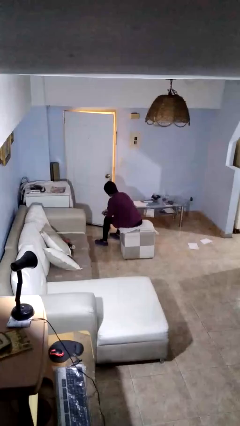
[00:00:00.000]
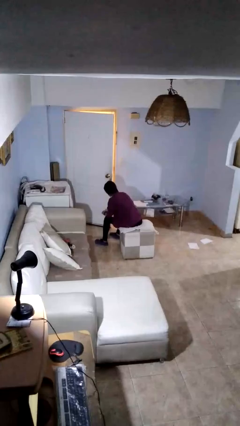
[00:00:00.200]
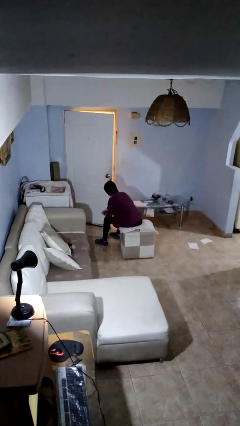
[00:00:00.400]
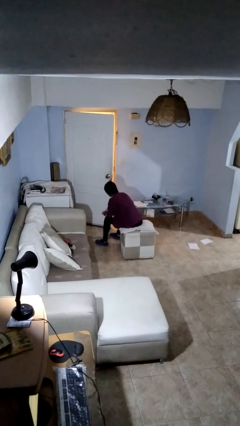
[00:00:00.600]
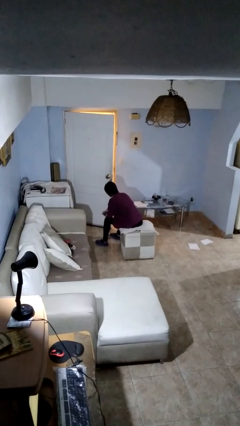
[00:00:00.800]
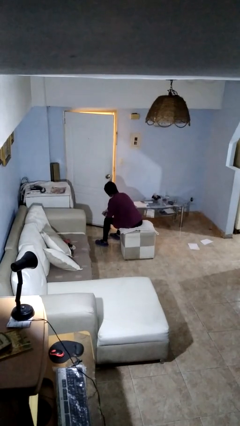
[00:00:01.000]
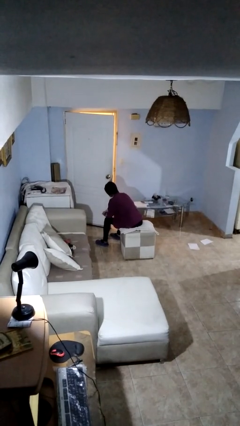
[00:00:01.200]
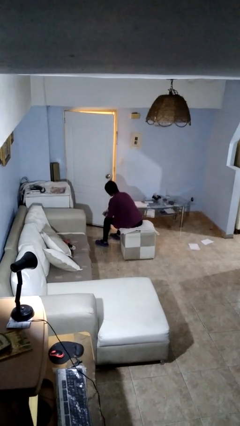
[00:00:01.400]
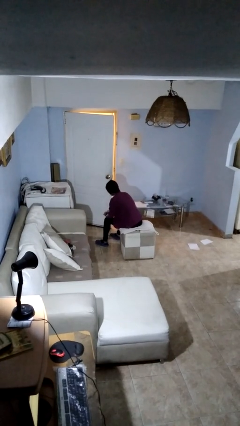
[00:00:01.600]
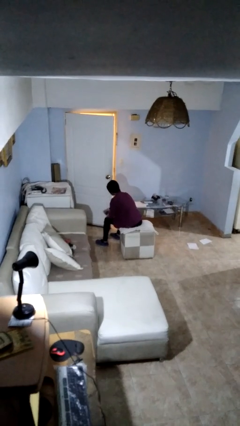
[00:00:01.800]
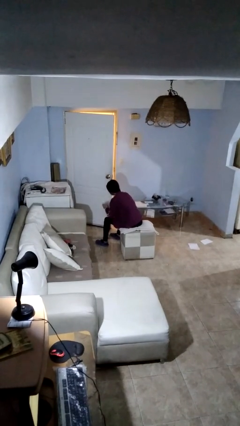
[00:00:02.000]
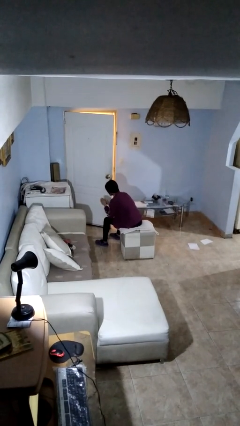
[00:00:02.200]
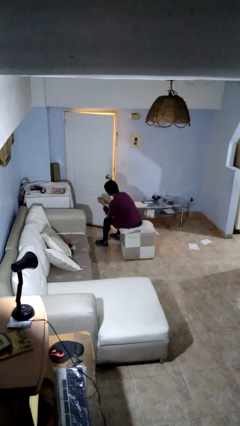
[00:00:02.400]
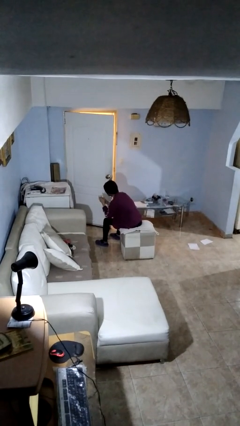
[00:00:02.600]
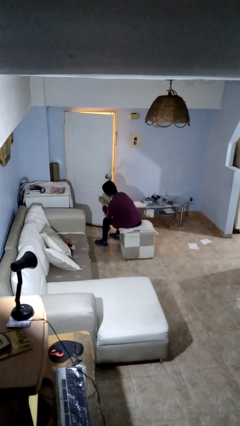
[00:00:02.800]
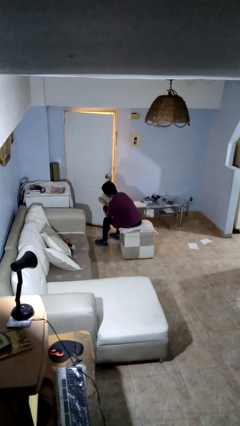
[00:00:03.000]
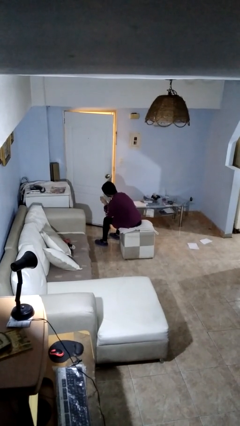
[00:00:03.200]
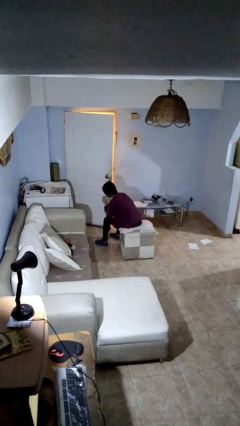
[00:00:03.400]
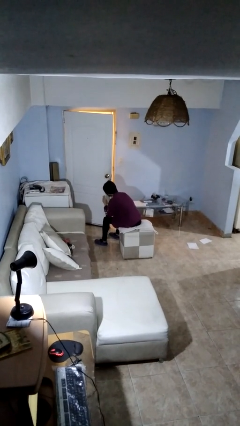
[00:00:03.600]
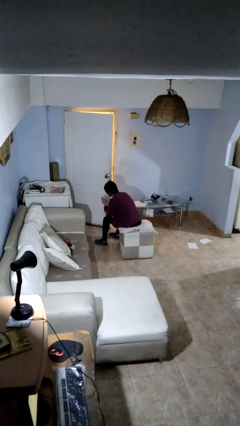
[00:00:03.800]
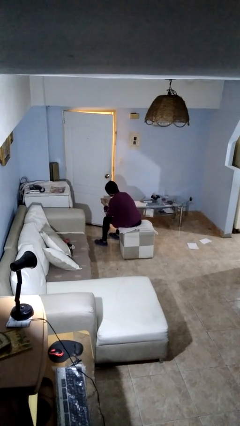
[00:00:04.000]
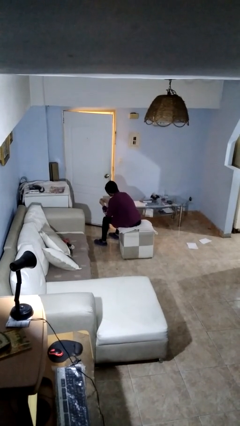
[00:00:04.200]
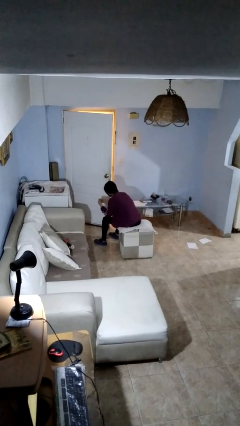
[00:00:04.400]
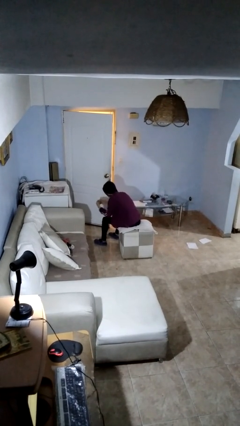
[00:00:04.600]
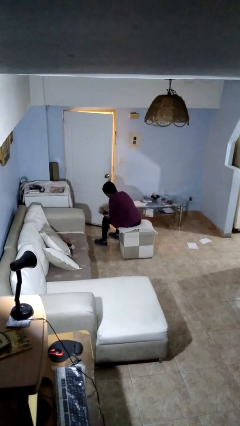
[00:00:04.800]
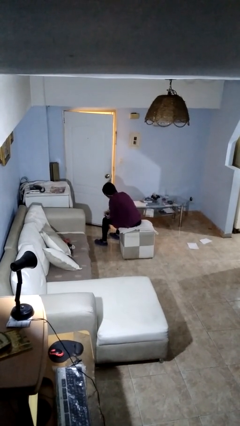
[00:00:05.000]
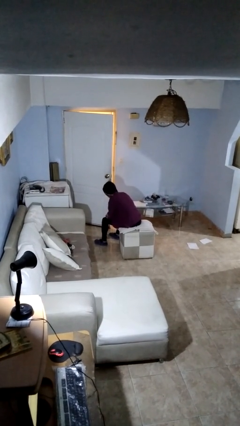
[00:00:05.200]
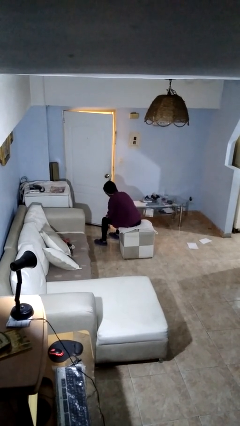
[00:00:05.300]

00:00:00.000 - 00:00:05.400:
person looks at hands in lap

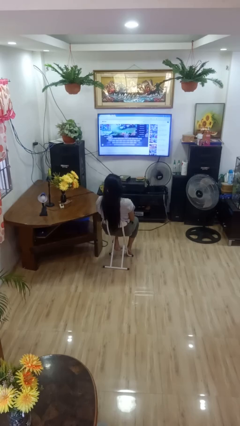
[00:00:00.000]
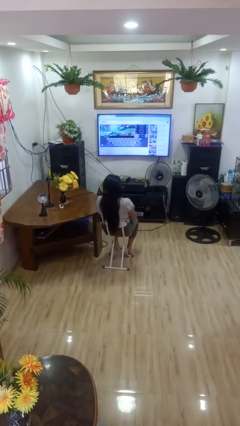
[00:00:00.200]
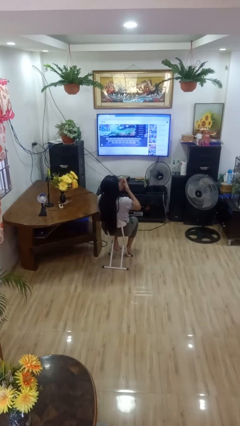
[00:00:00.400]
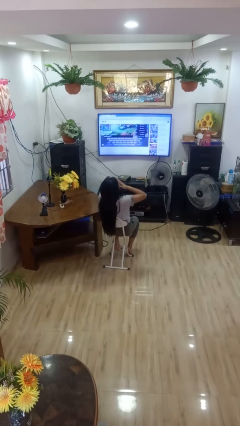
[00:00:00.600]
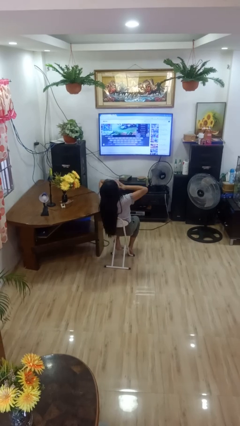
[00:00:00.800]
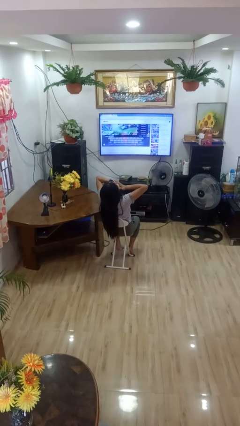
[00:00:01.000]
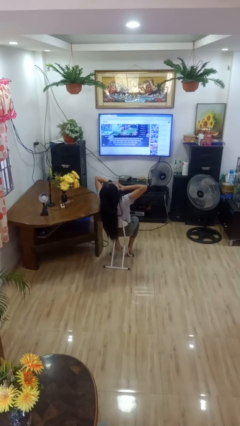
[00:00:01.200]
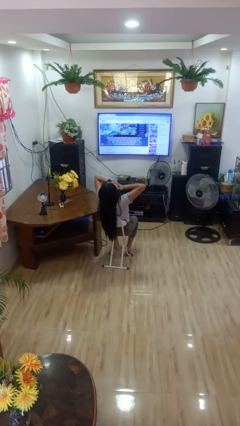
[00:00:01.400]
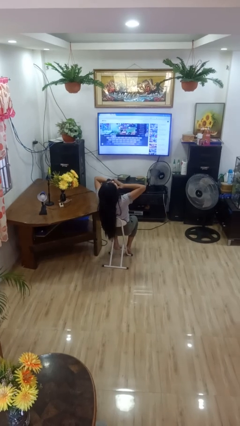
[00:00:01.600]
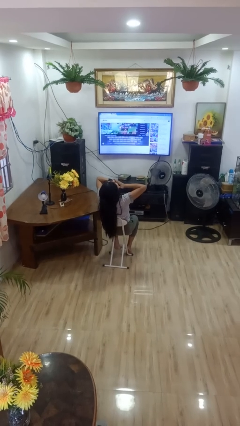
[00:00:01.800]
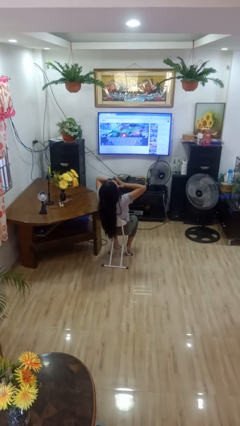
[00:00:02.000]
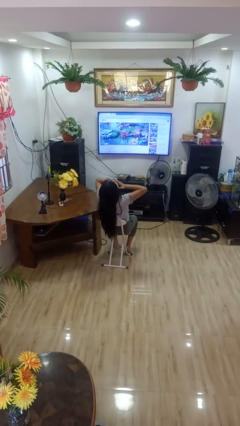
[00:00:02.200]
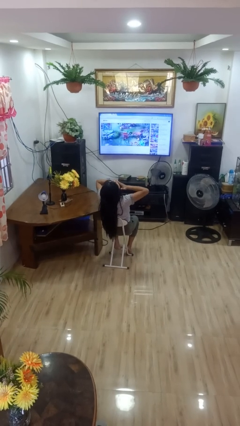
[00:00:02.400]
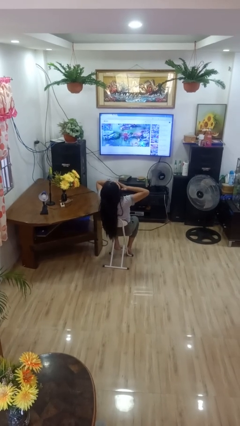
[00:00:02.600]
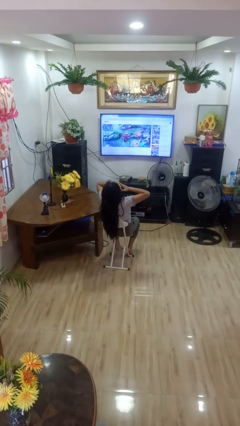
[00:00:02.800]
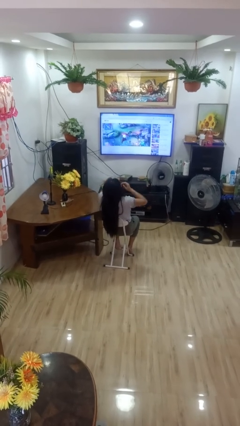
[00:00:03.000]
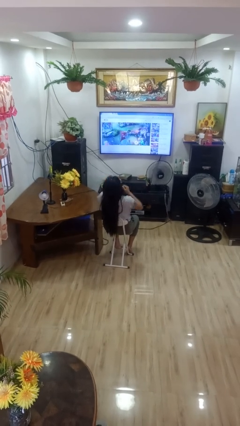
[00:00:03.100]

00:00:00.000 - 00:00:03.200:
person yawns

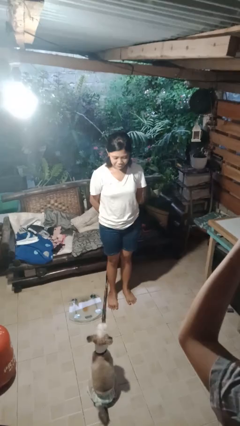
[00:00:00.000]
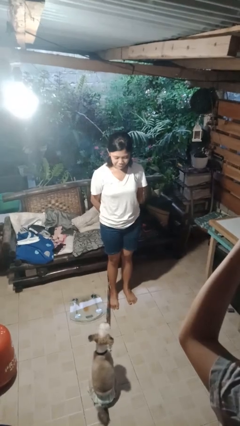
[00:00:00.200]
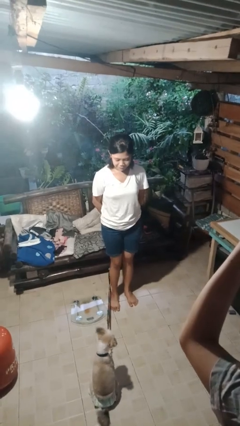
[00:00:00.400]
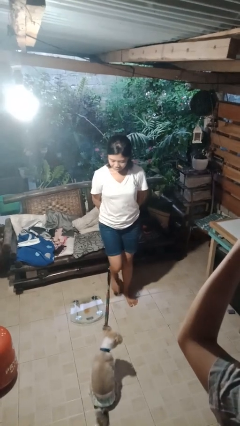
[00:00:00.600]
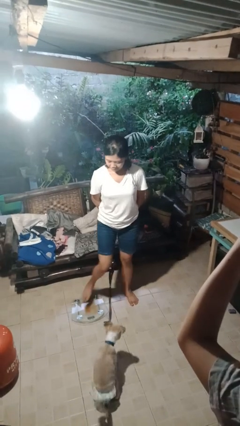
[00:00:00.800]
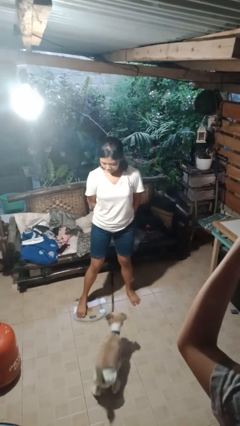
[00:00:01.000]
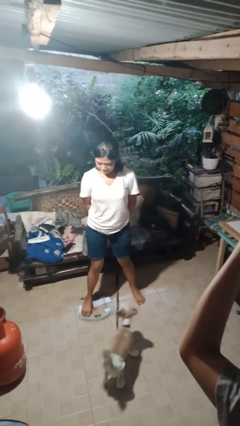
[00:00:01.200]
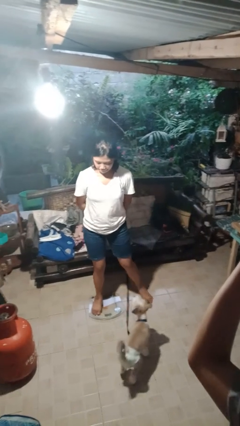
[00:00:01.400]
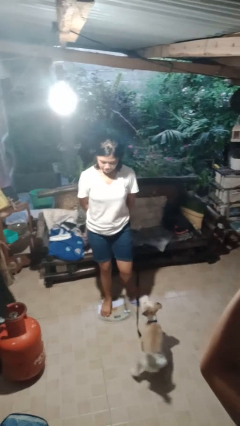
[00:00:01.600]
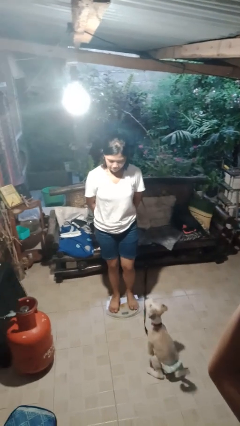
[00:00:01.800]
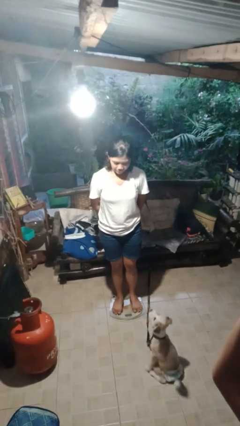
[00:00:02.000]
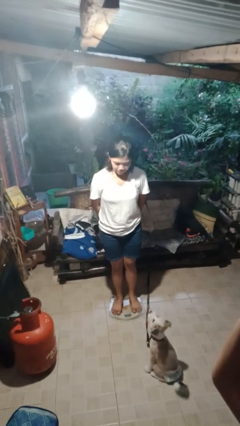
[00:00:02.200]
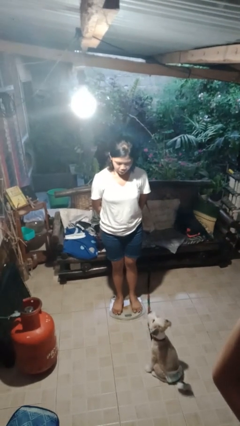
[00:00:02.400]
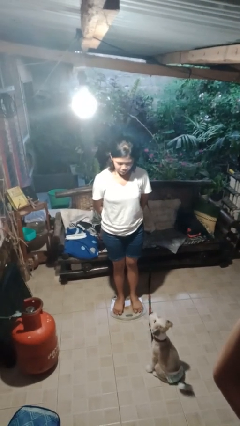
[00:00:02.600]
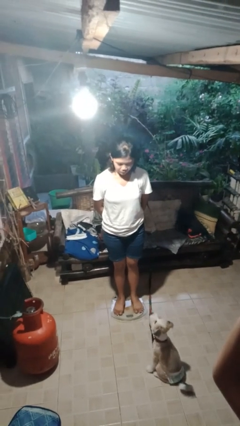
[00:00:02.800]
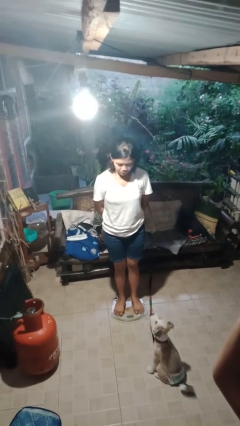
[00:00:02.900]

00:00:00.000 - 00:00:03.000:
person uses bodyweight scale

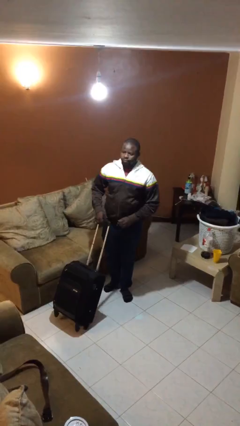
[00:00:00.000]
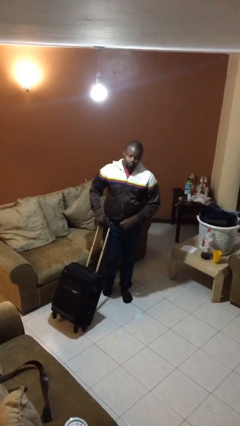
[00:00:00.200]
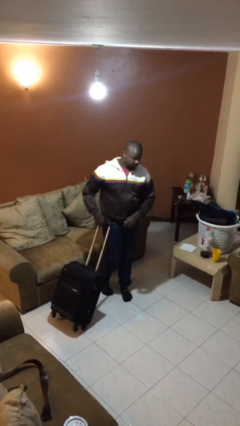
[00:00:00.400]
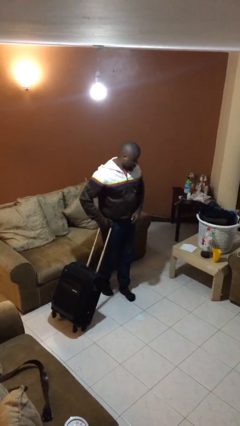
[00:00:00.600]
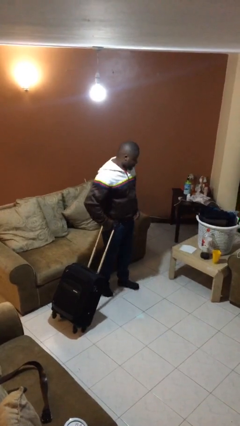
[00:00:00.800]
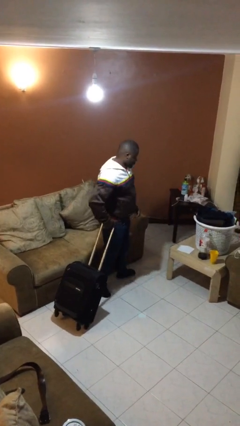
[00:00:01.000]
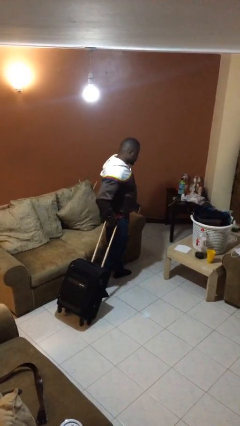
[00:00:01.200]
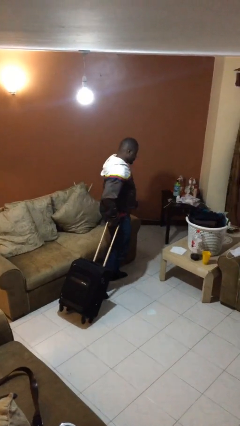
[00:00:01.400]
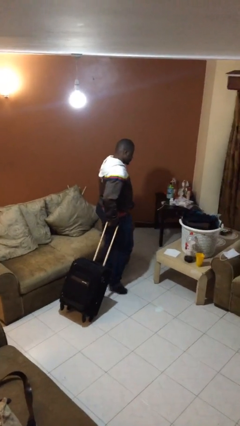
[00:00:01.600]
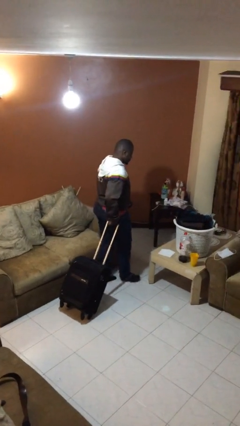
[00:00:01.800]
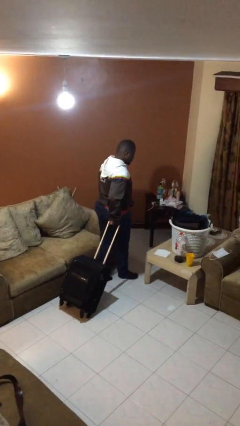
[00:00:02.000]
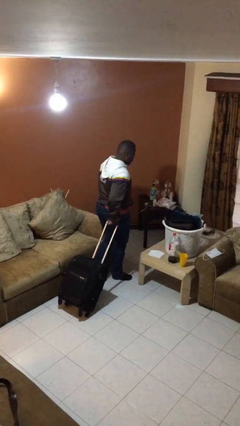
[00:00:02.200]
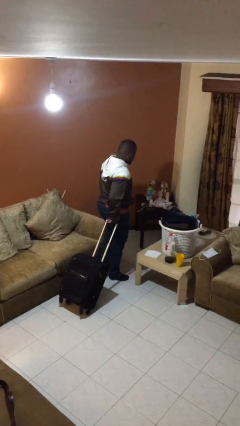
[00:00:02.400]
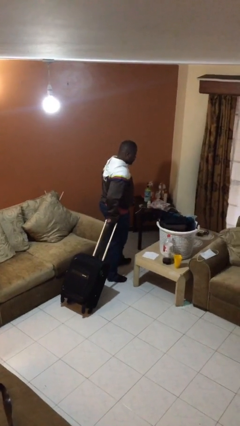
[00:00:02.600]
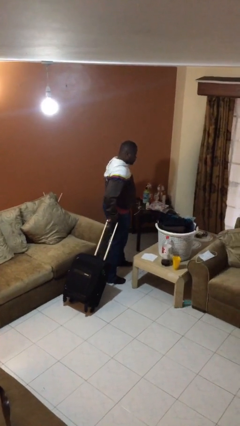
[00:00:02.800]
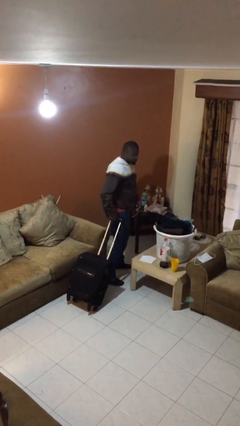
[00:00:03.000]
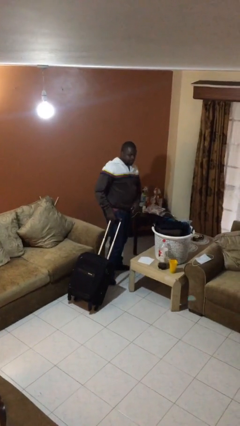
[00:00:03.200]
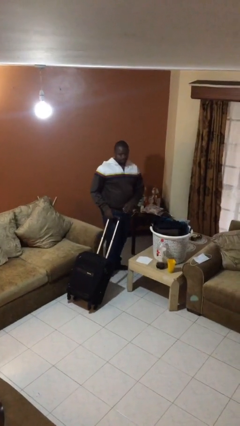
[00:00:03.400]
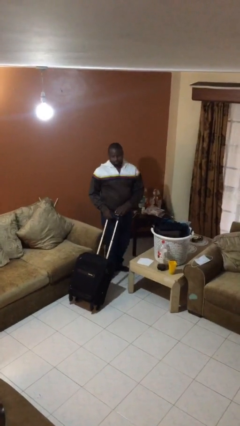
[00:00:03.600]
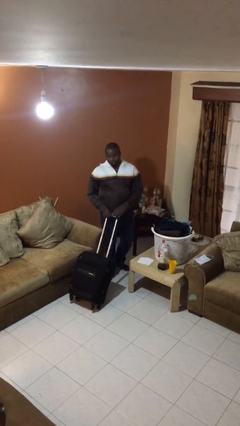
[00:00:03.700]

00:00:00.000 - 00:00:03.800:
person pulls wheeled cart

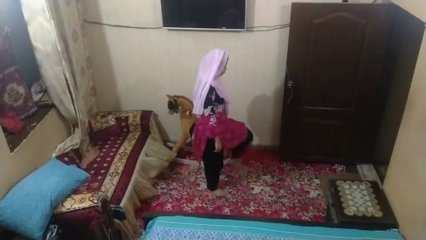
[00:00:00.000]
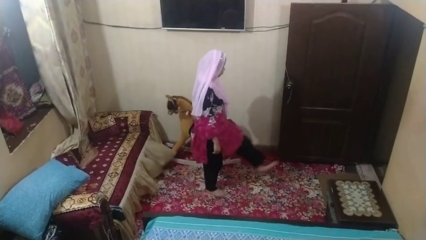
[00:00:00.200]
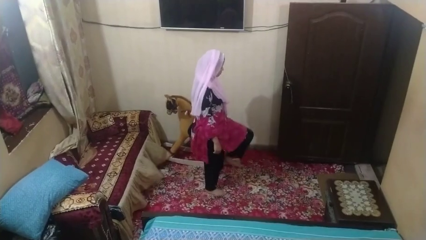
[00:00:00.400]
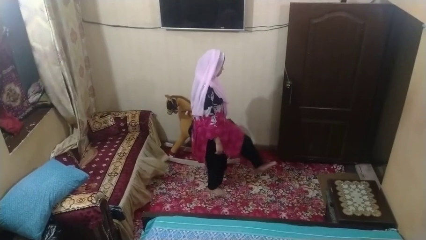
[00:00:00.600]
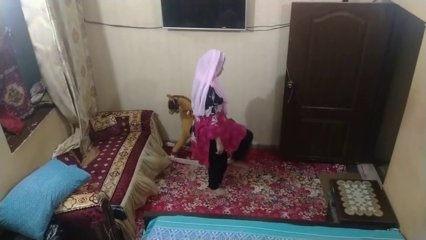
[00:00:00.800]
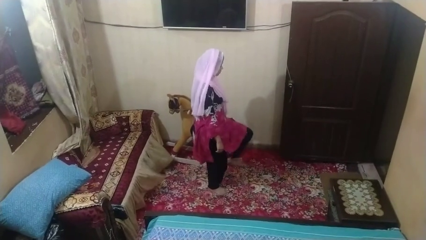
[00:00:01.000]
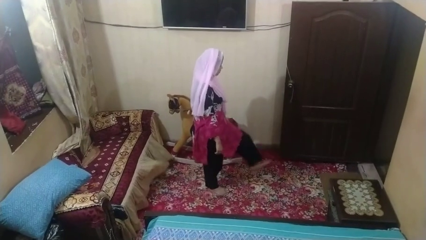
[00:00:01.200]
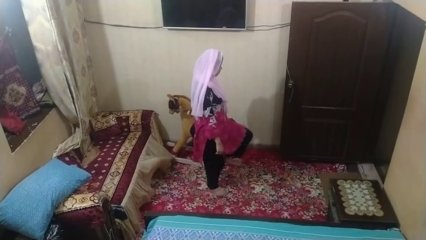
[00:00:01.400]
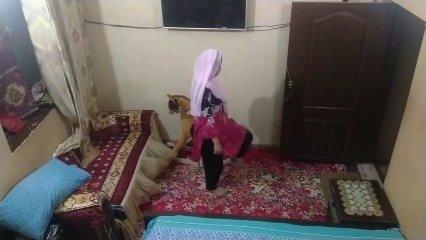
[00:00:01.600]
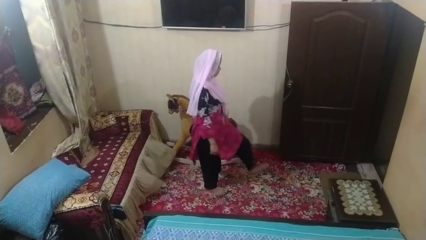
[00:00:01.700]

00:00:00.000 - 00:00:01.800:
person karate kicks
